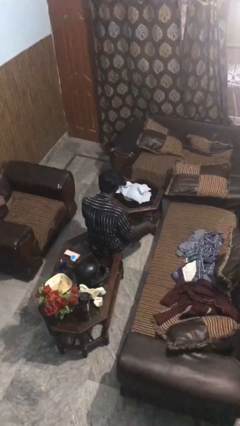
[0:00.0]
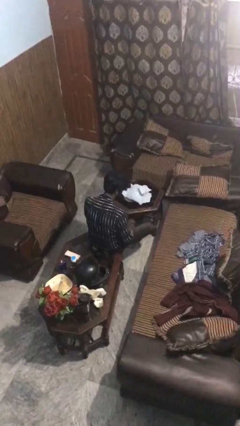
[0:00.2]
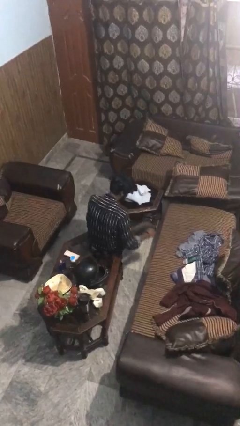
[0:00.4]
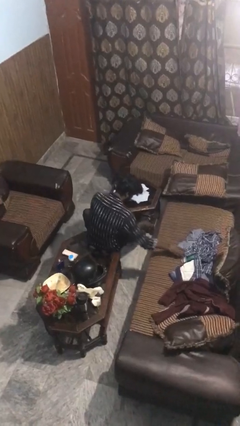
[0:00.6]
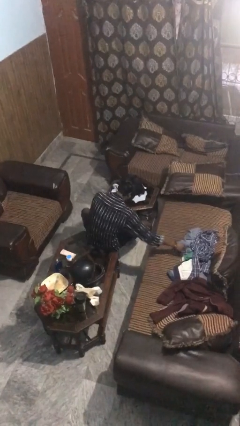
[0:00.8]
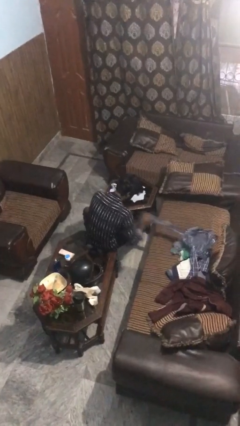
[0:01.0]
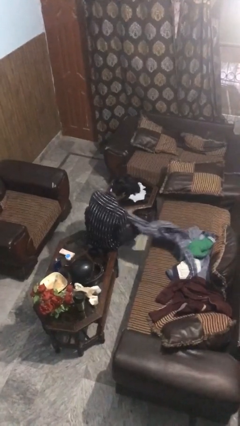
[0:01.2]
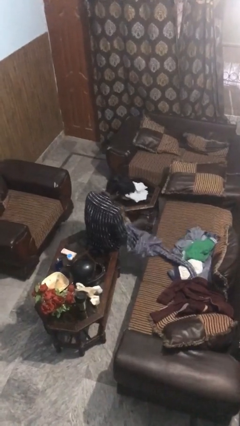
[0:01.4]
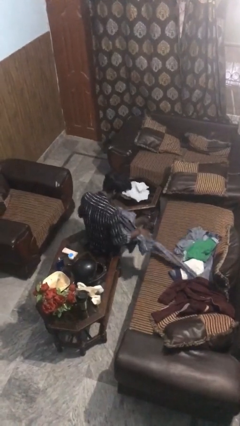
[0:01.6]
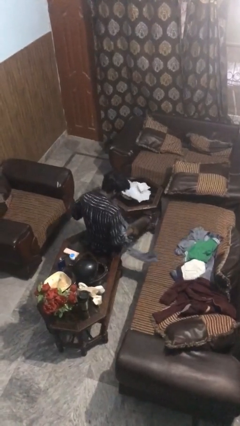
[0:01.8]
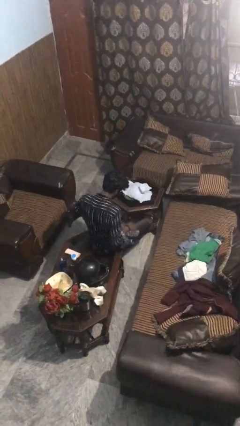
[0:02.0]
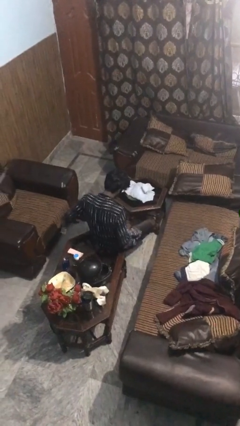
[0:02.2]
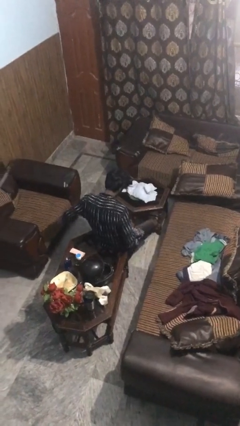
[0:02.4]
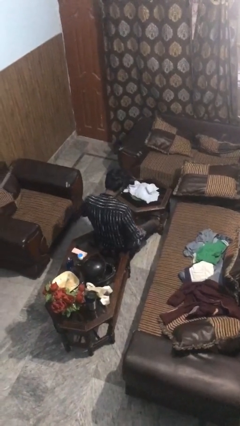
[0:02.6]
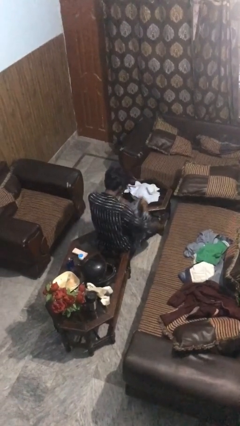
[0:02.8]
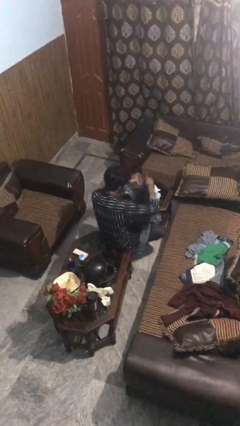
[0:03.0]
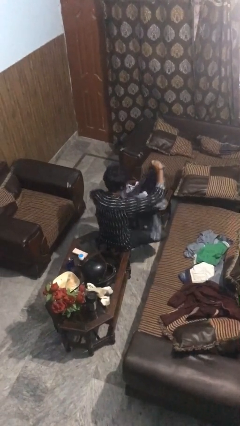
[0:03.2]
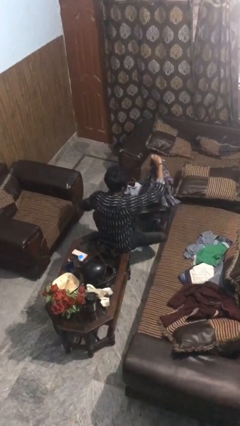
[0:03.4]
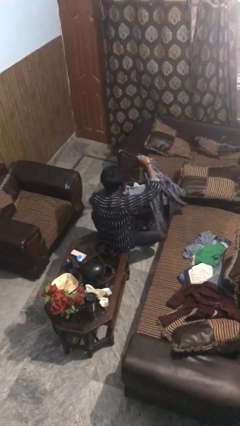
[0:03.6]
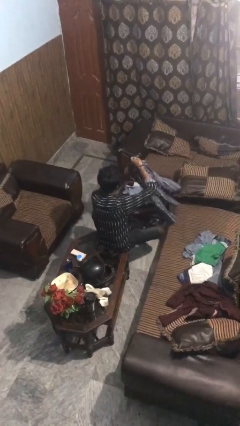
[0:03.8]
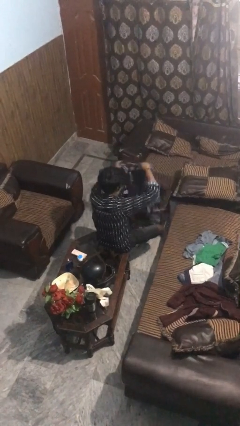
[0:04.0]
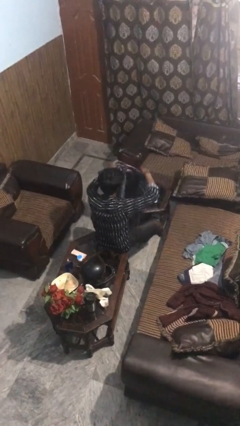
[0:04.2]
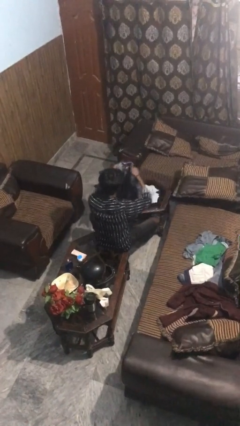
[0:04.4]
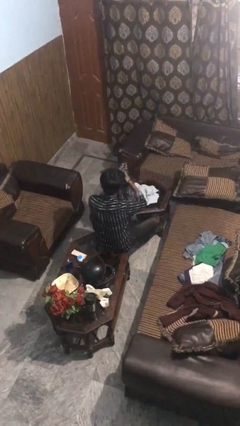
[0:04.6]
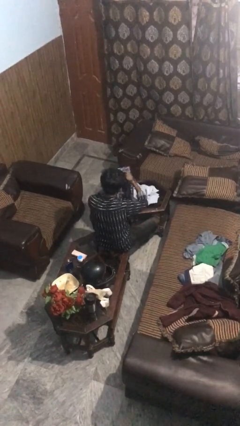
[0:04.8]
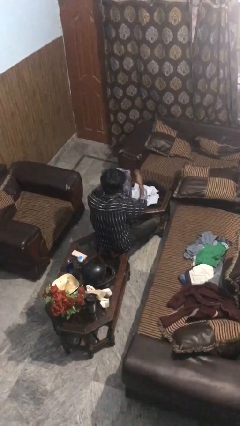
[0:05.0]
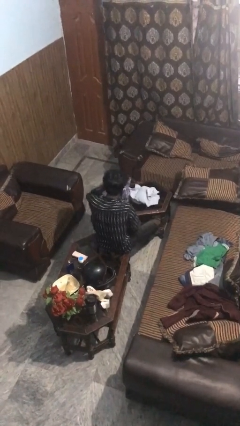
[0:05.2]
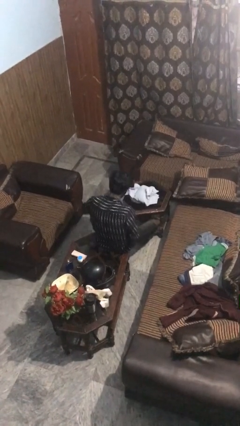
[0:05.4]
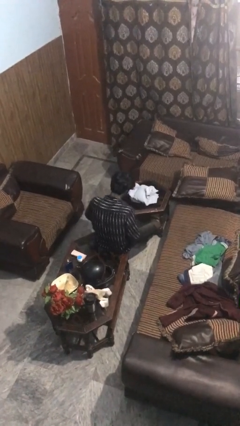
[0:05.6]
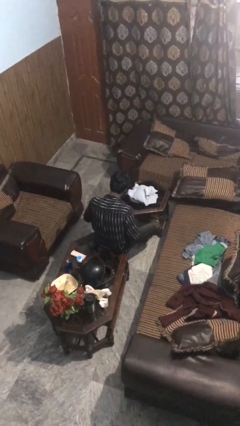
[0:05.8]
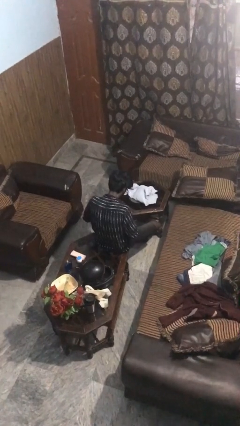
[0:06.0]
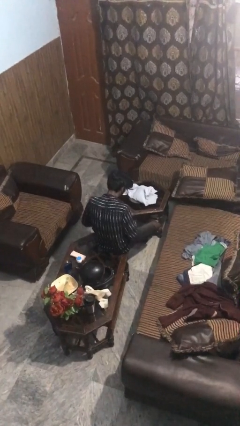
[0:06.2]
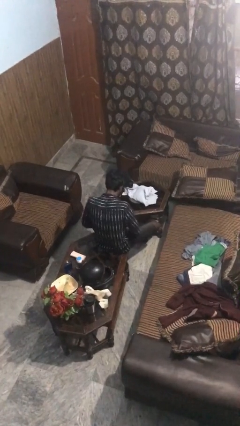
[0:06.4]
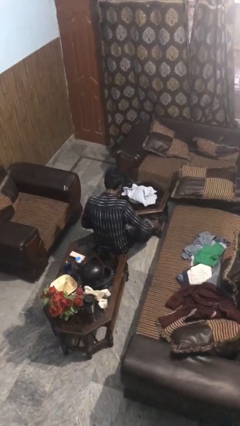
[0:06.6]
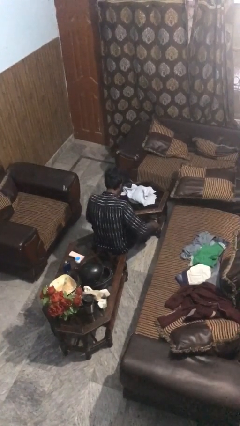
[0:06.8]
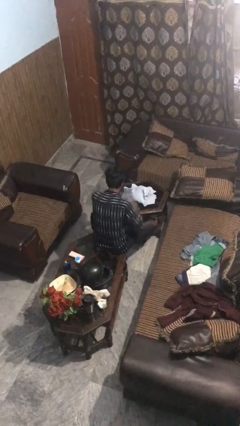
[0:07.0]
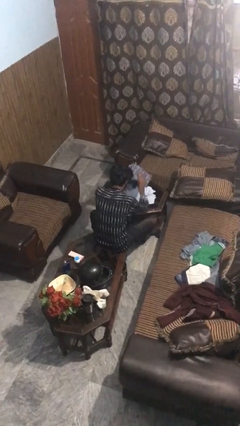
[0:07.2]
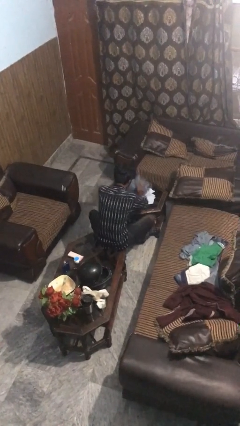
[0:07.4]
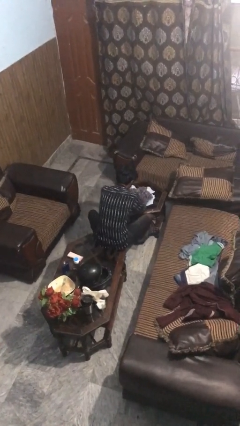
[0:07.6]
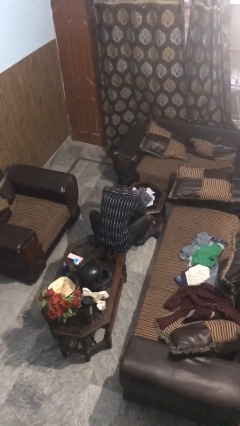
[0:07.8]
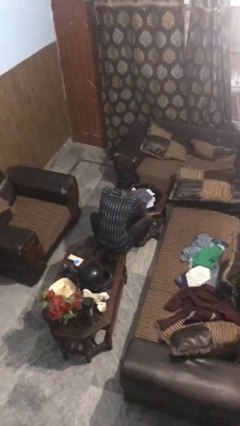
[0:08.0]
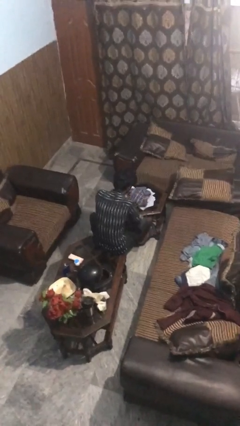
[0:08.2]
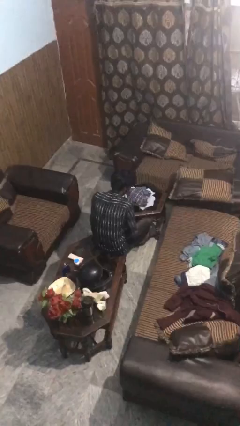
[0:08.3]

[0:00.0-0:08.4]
person folds shirt

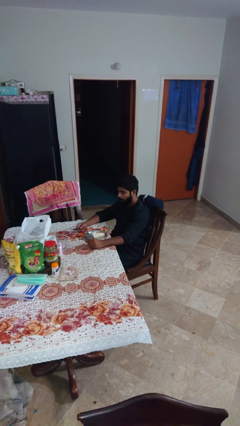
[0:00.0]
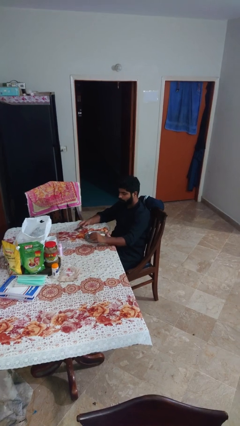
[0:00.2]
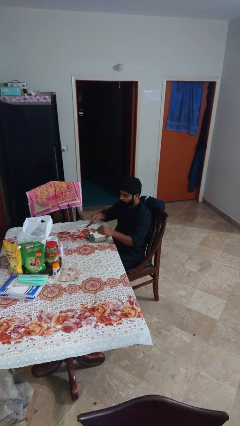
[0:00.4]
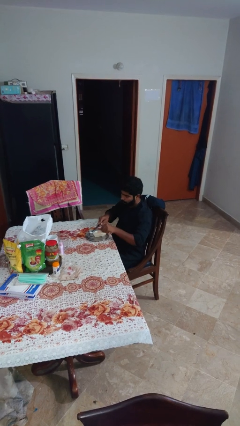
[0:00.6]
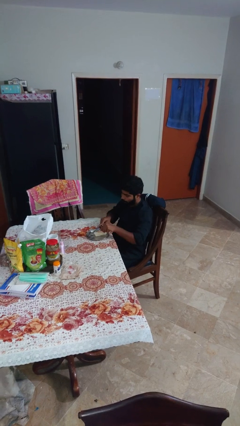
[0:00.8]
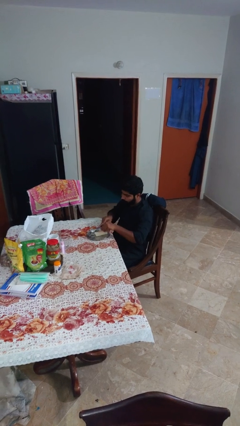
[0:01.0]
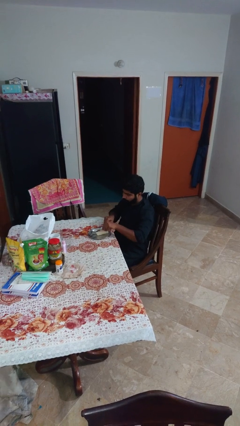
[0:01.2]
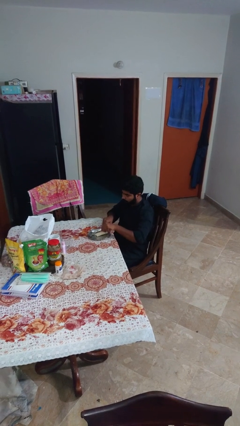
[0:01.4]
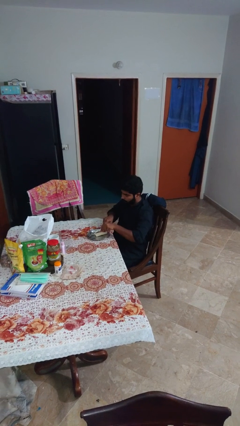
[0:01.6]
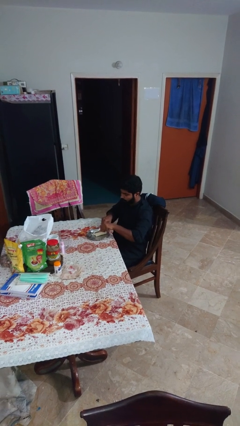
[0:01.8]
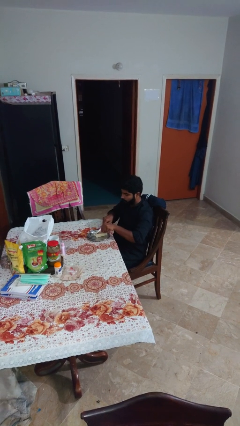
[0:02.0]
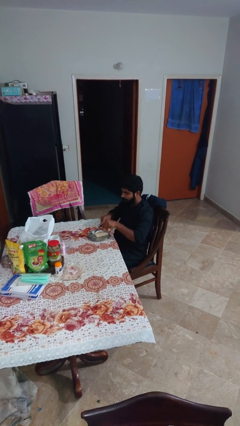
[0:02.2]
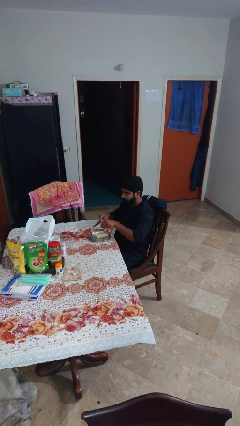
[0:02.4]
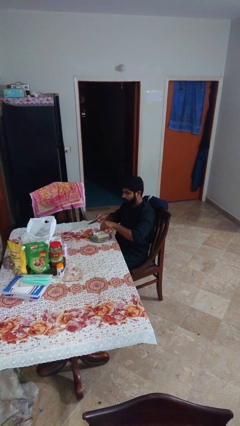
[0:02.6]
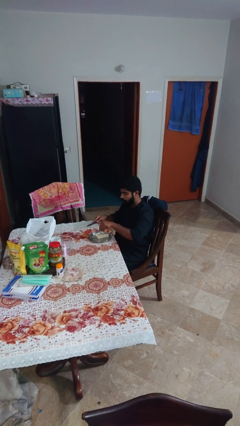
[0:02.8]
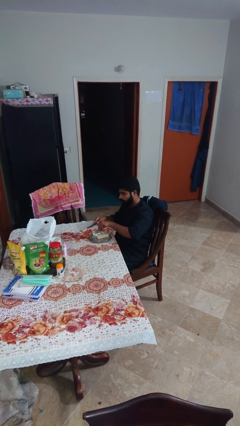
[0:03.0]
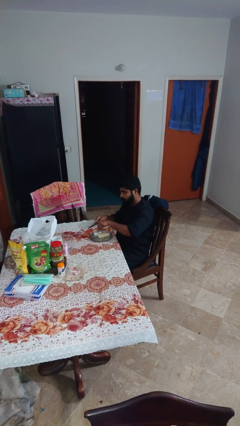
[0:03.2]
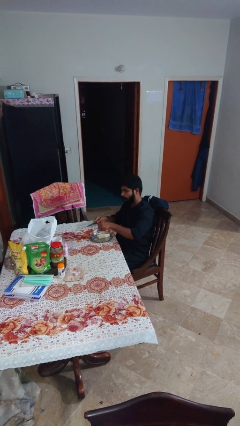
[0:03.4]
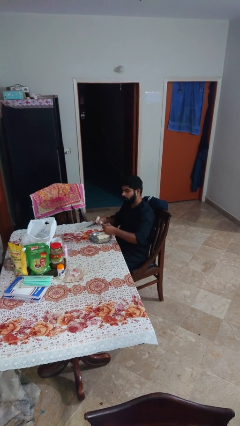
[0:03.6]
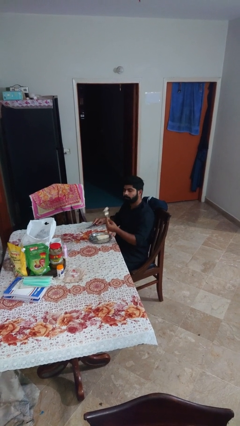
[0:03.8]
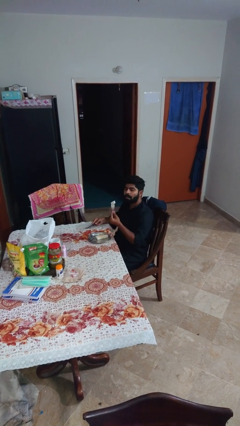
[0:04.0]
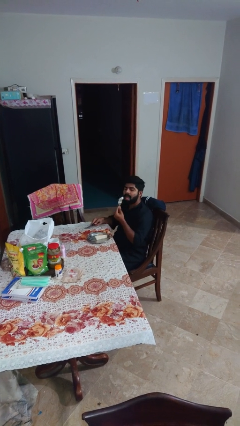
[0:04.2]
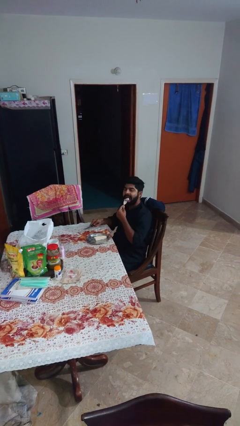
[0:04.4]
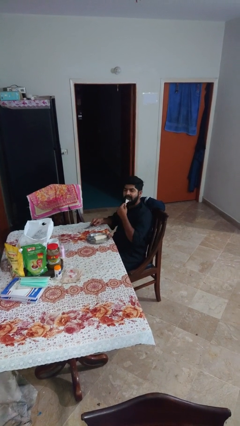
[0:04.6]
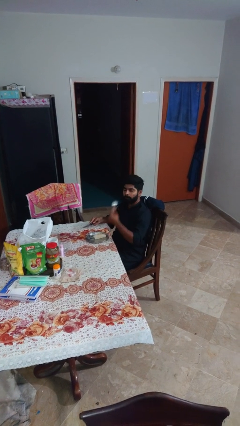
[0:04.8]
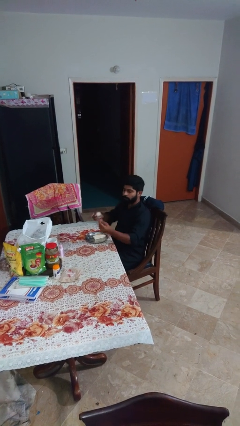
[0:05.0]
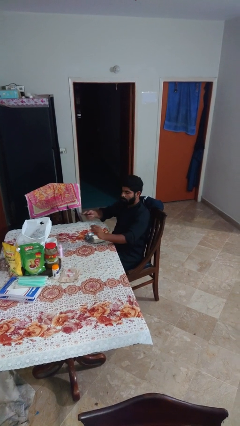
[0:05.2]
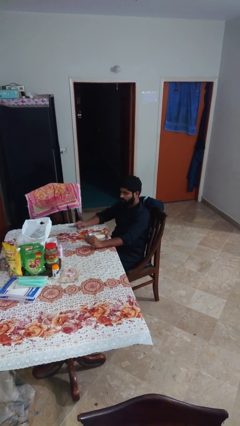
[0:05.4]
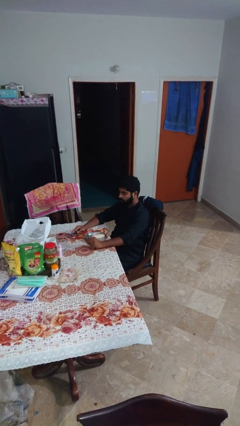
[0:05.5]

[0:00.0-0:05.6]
person eats with utensil

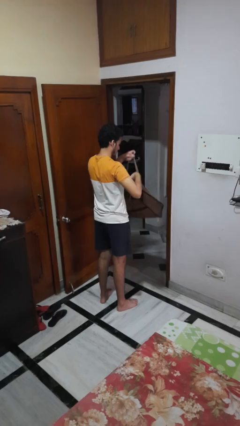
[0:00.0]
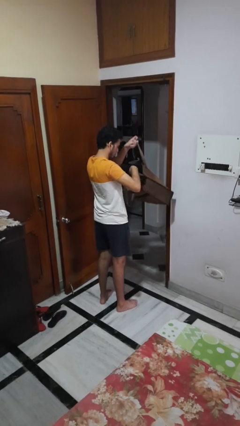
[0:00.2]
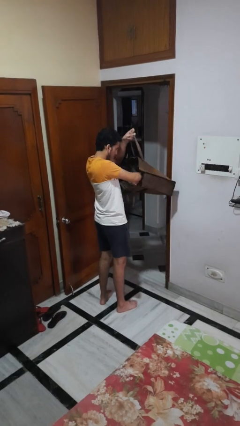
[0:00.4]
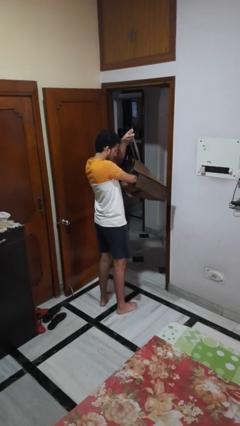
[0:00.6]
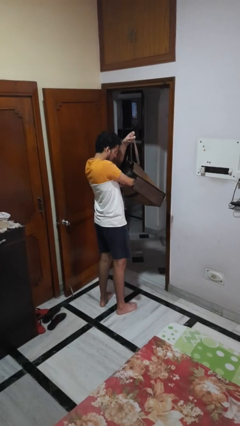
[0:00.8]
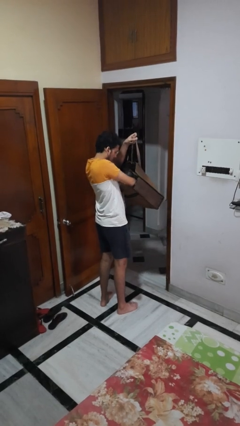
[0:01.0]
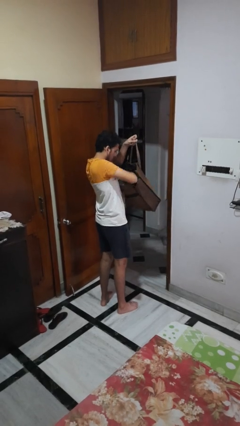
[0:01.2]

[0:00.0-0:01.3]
person searches in bag

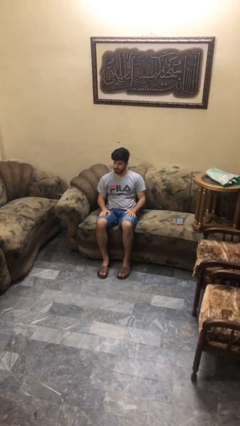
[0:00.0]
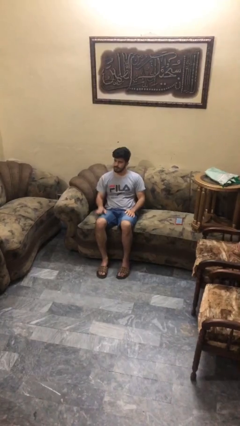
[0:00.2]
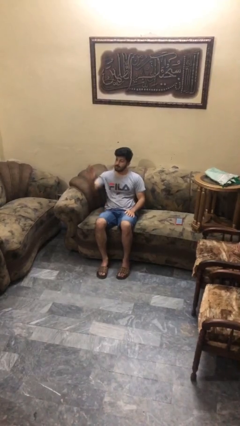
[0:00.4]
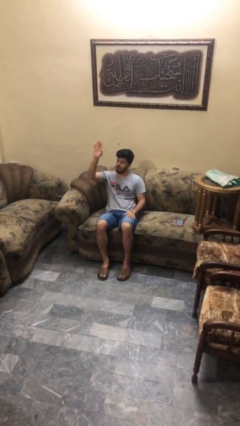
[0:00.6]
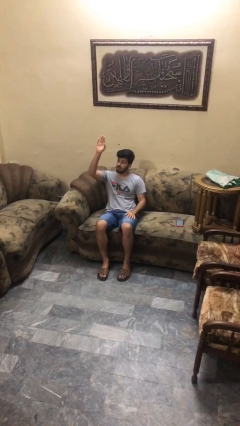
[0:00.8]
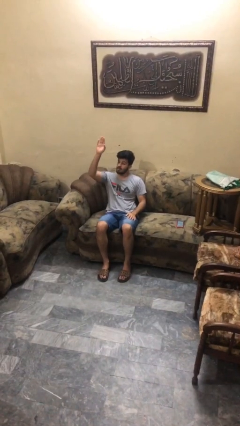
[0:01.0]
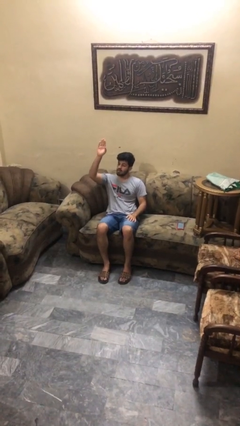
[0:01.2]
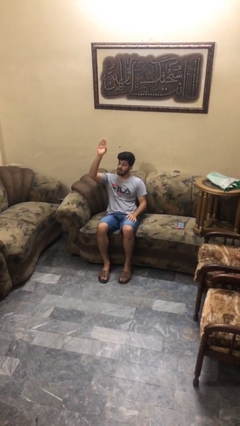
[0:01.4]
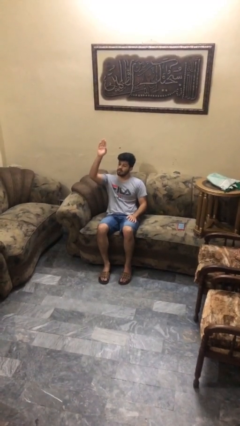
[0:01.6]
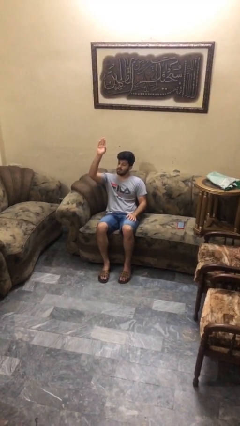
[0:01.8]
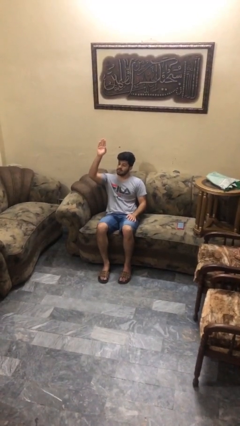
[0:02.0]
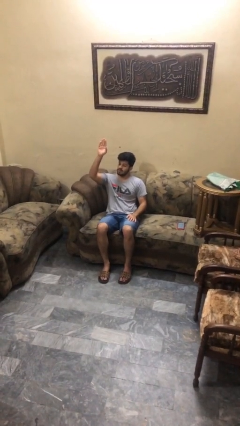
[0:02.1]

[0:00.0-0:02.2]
person gestures raise hand

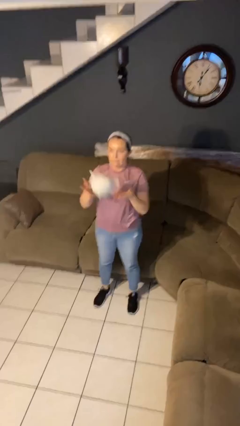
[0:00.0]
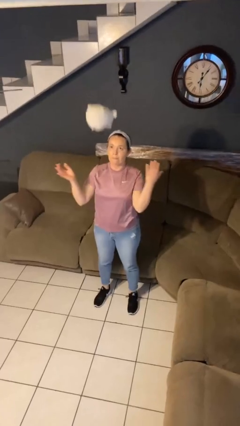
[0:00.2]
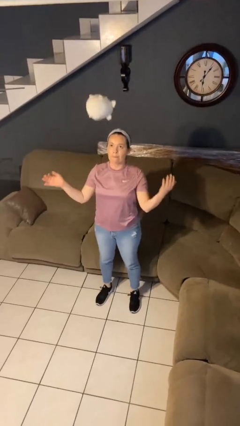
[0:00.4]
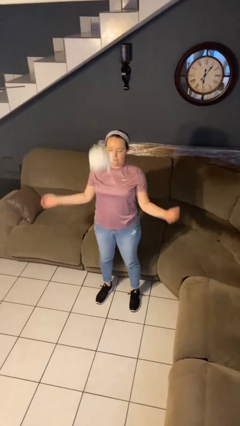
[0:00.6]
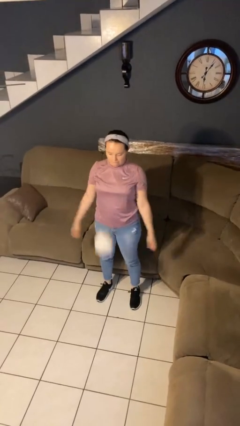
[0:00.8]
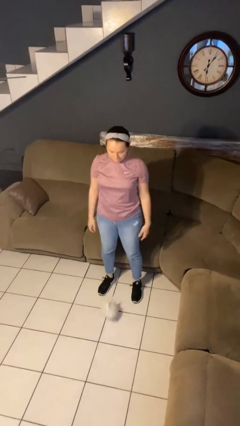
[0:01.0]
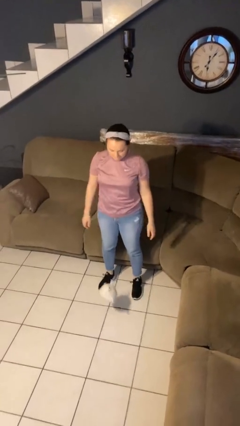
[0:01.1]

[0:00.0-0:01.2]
person throws object into air
